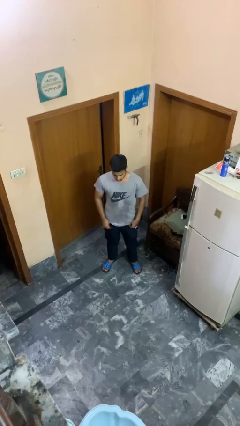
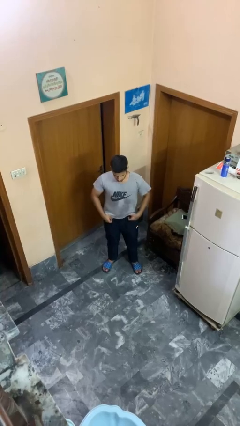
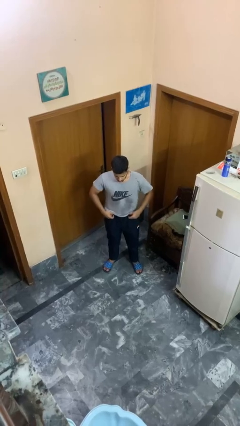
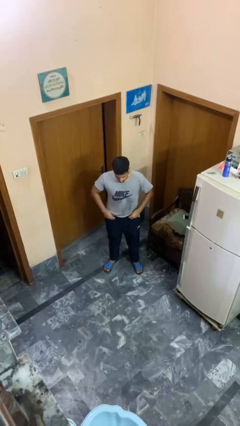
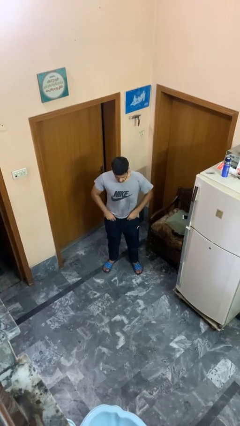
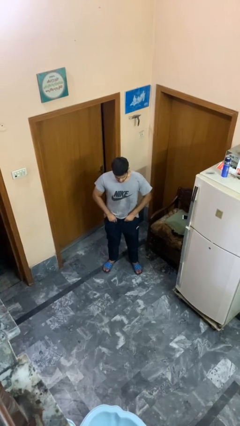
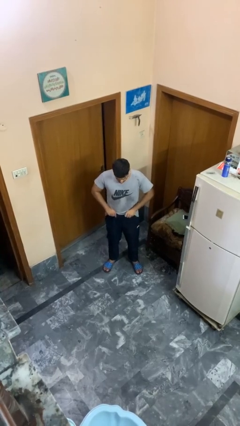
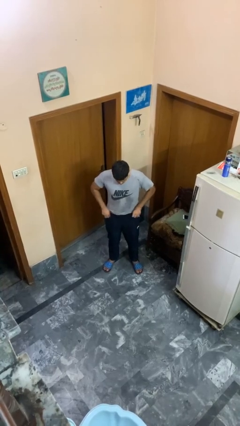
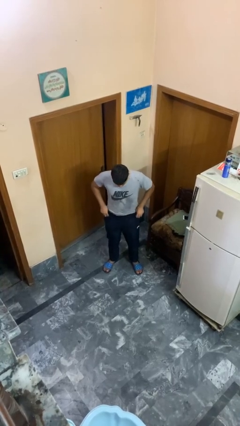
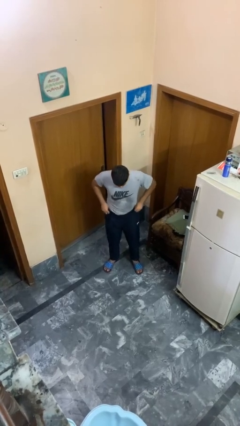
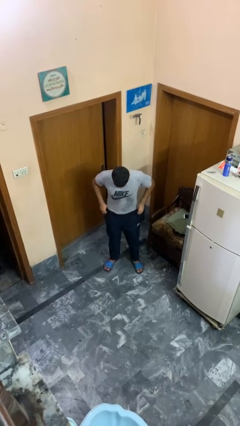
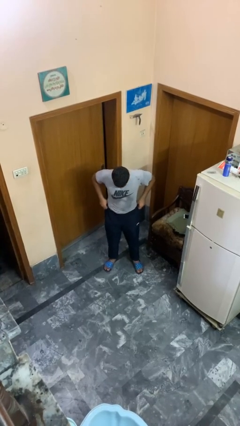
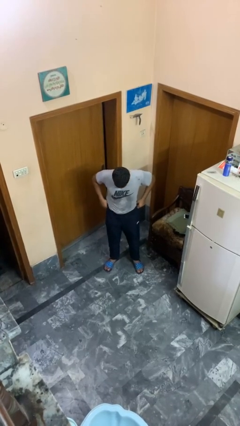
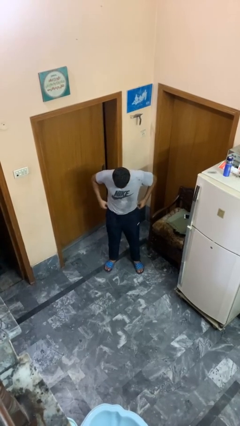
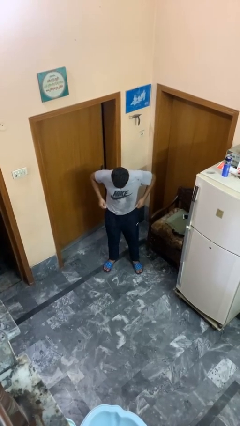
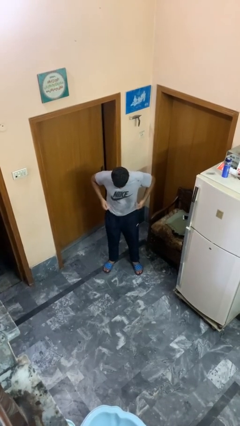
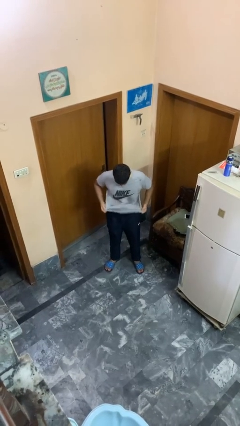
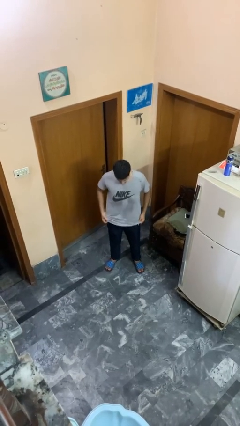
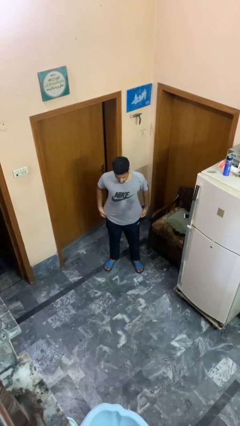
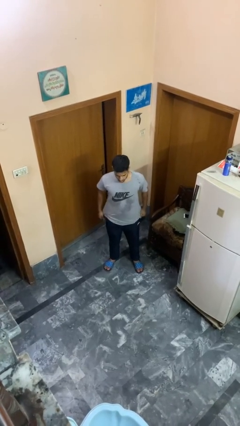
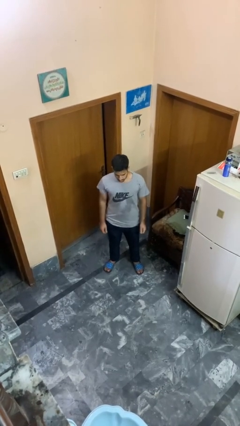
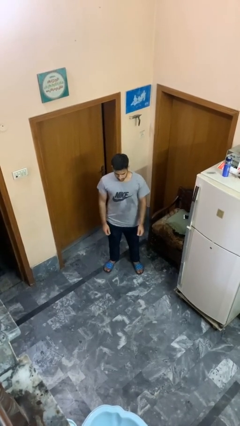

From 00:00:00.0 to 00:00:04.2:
person hikes up pants

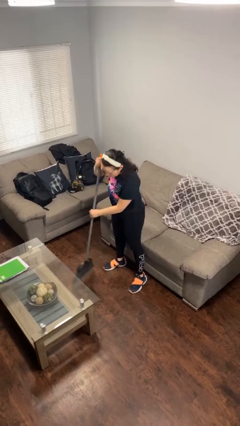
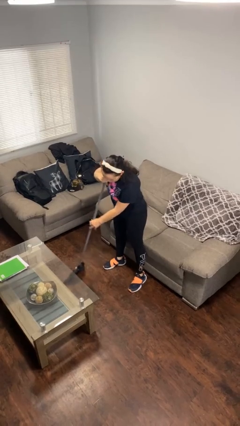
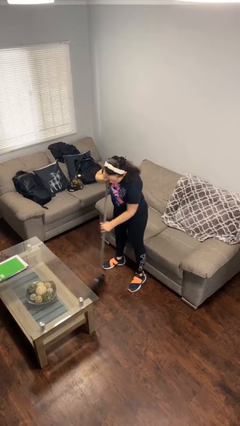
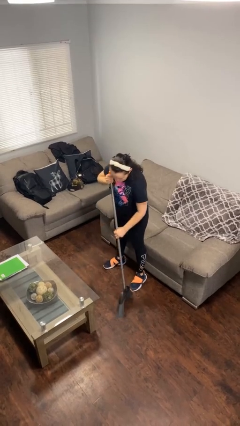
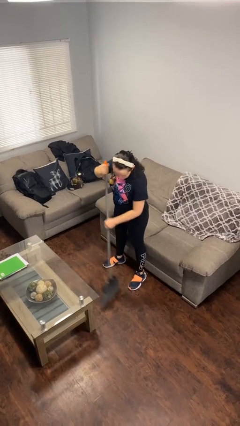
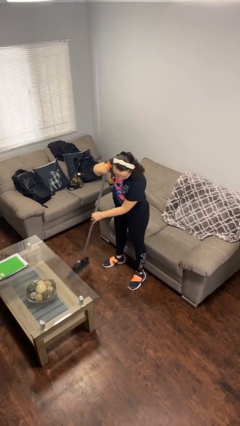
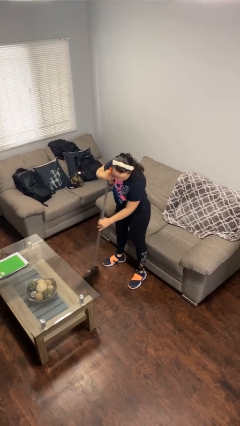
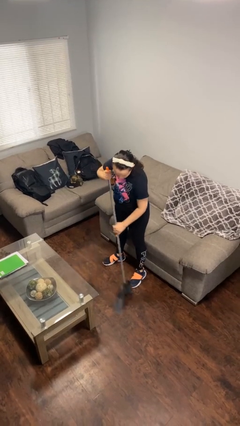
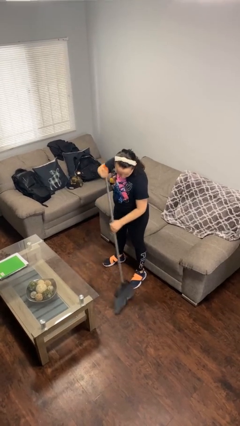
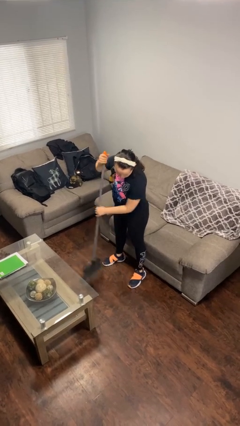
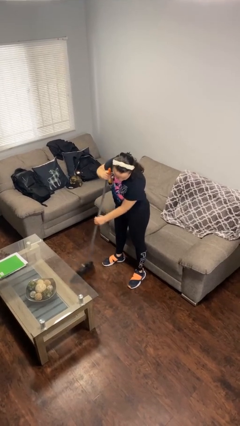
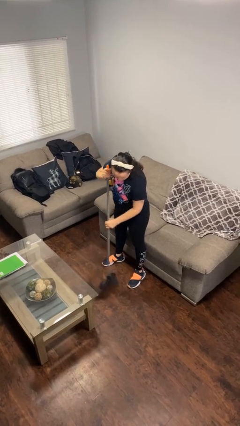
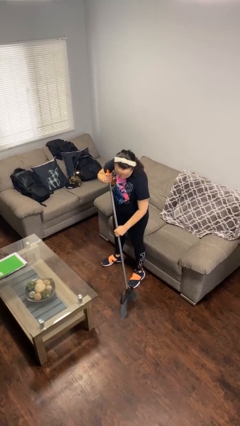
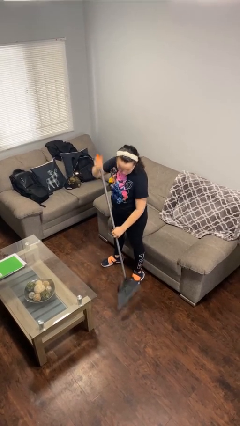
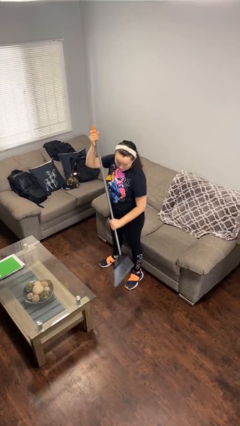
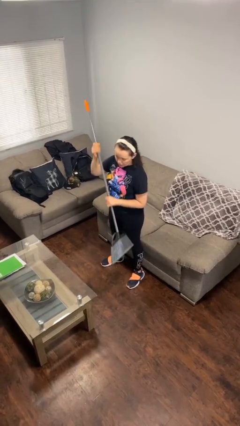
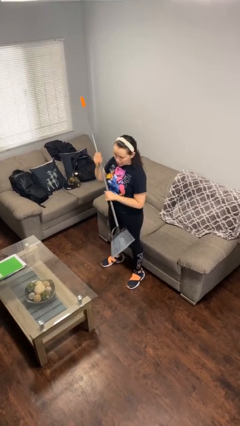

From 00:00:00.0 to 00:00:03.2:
person sweeps floor

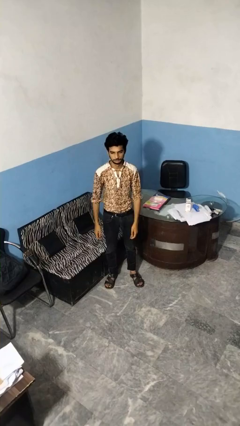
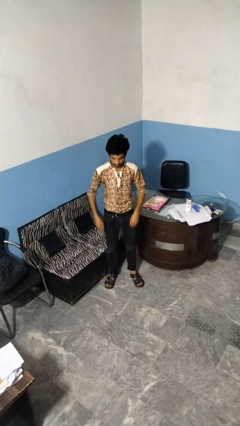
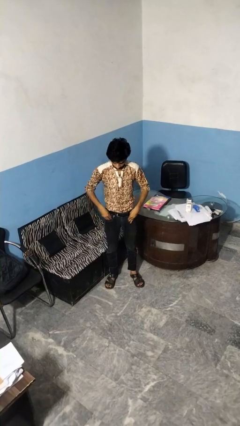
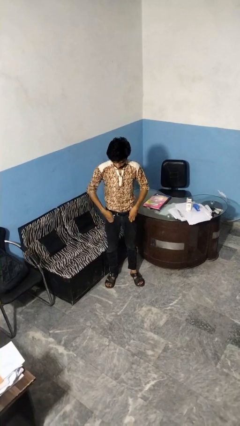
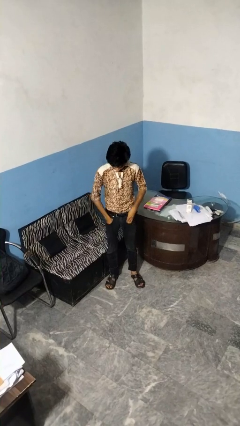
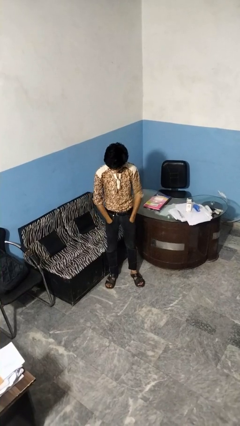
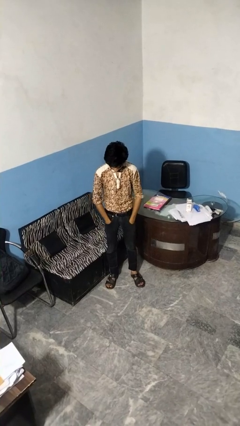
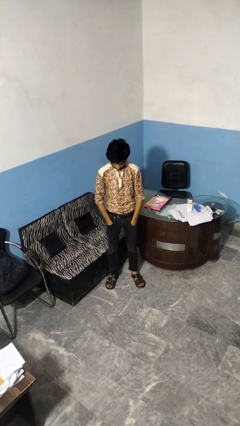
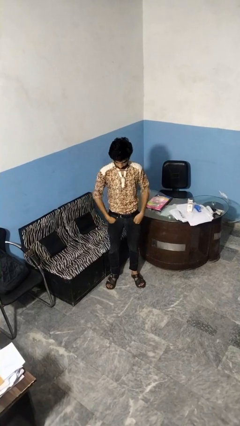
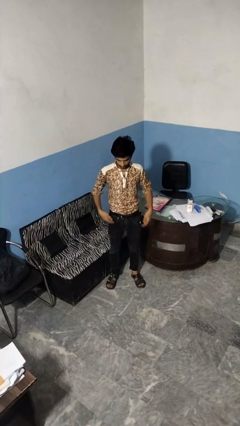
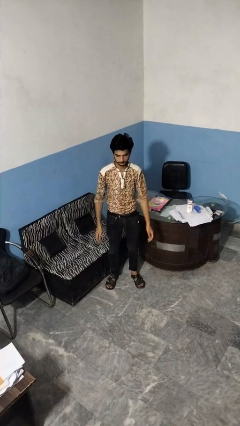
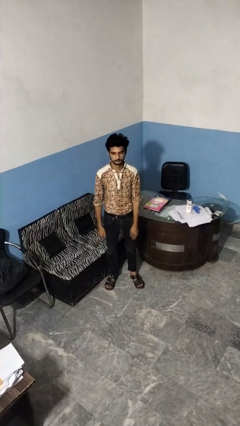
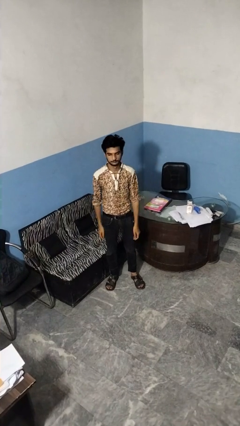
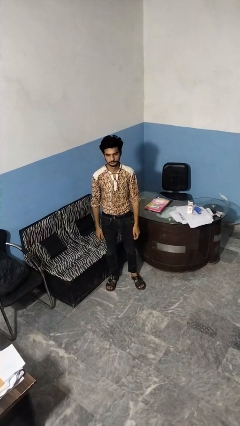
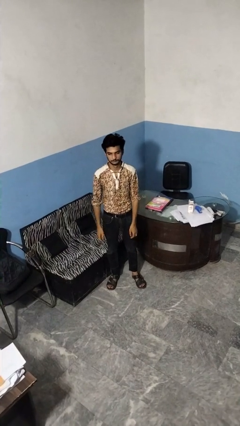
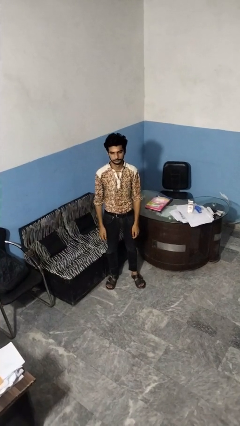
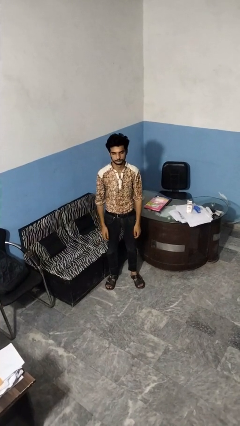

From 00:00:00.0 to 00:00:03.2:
person puts hands in back pockets

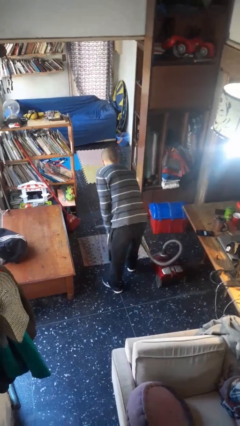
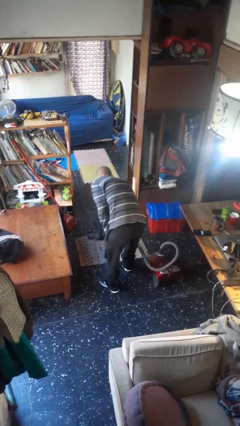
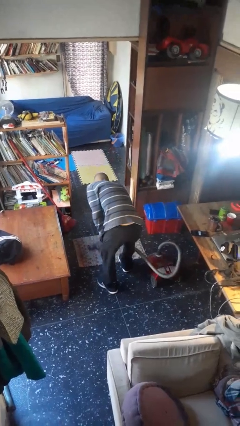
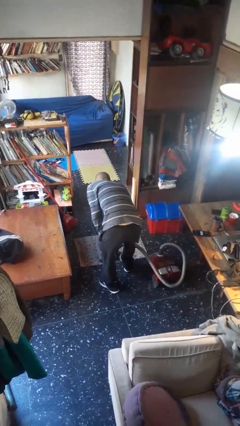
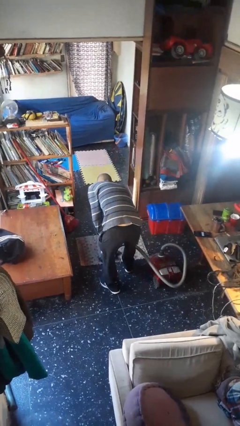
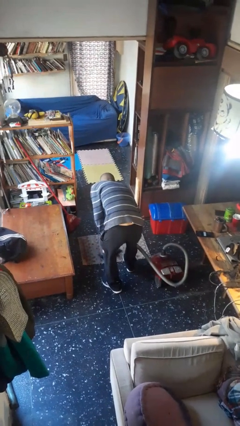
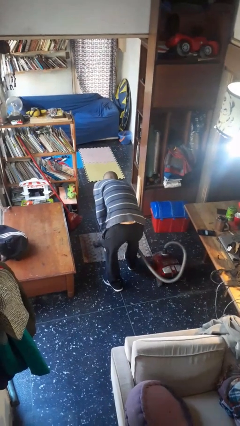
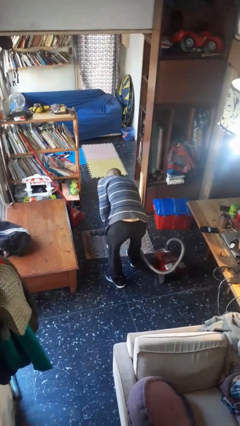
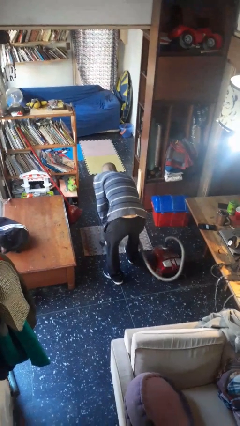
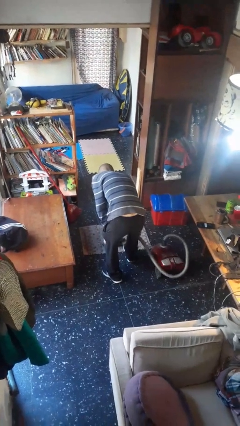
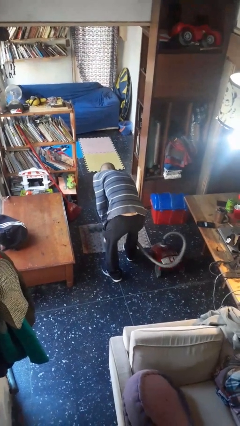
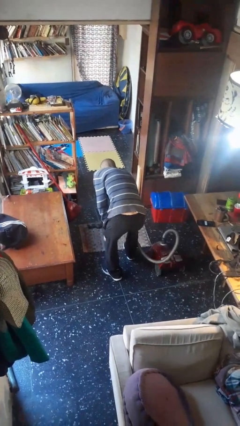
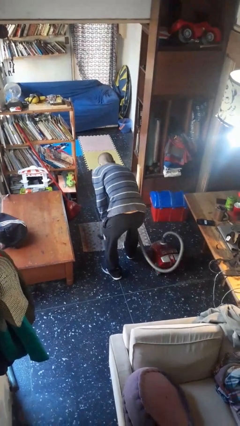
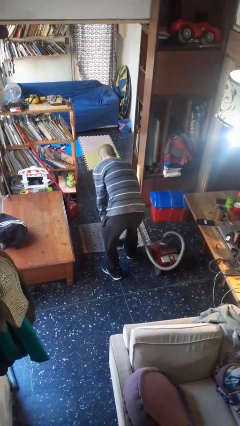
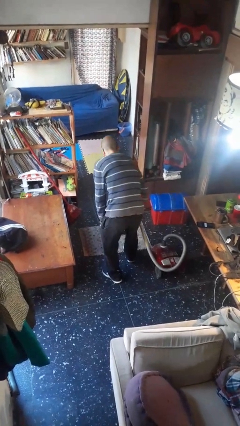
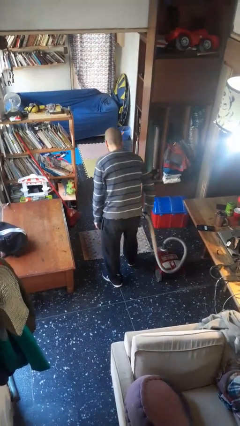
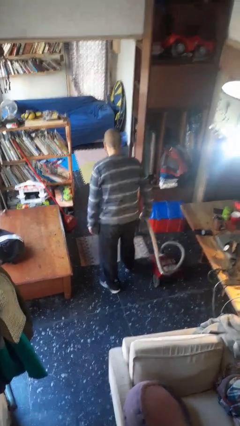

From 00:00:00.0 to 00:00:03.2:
person vacuums carpet

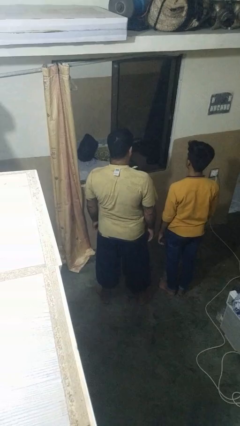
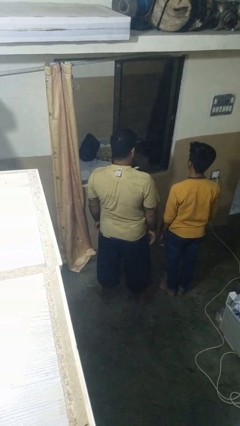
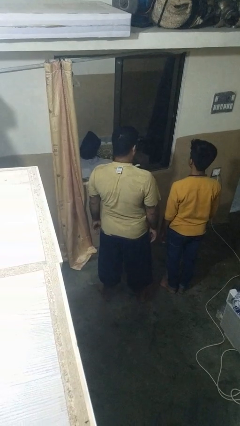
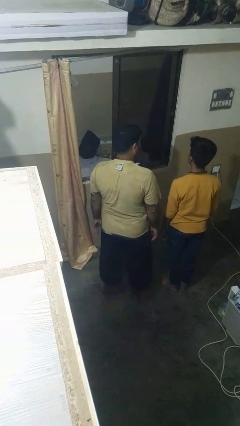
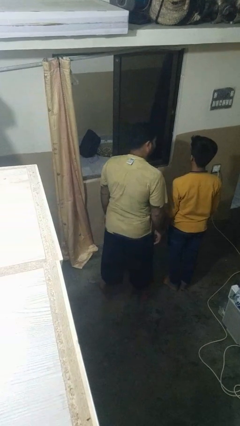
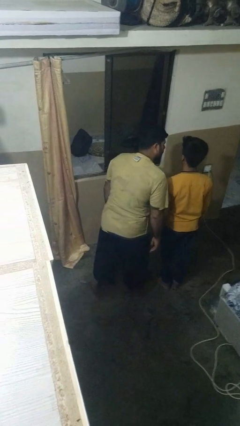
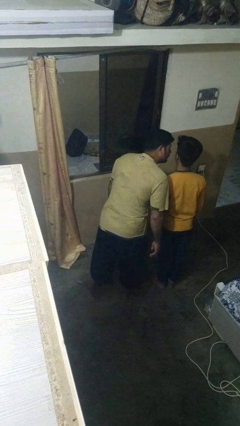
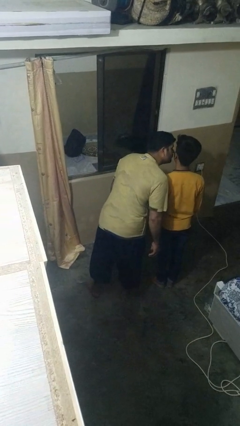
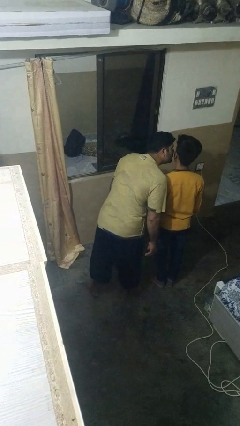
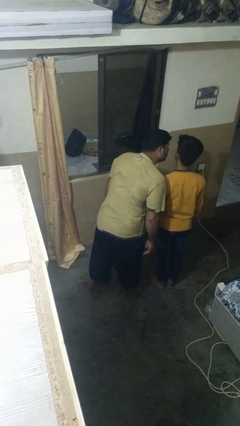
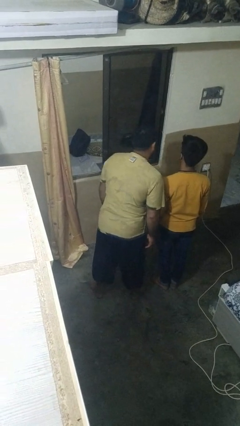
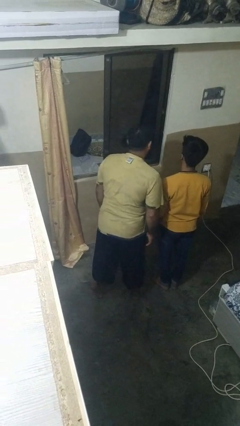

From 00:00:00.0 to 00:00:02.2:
person kisses cheek of person

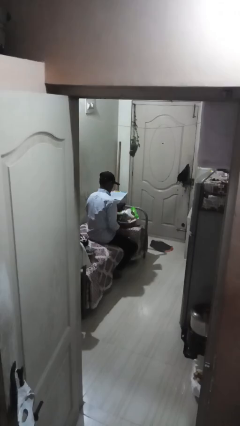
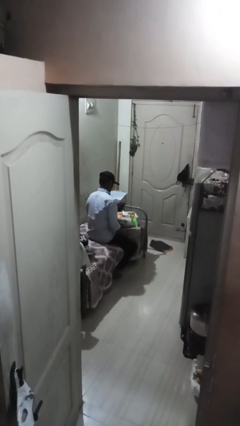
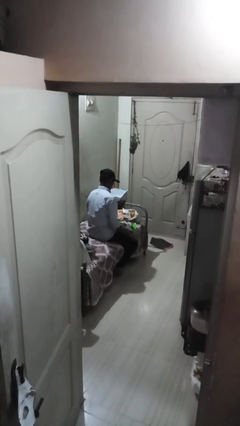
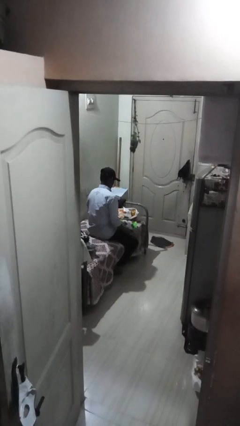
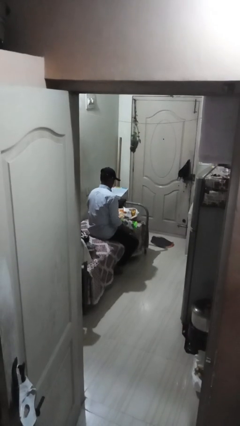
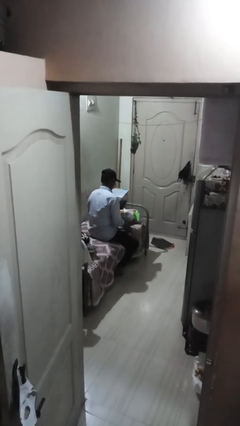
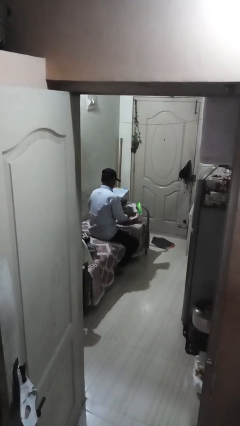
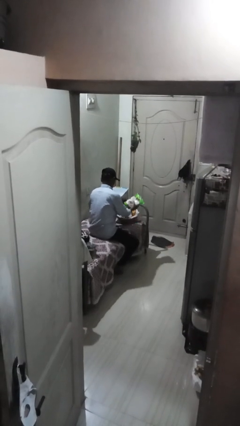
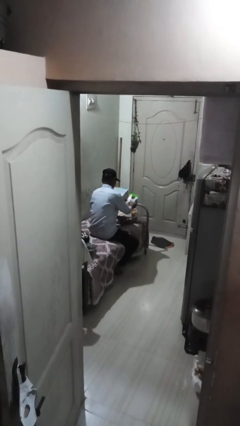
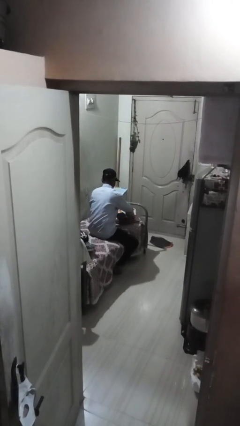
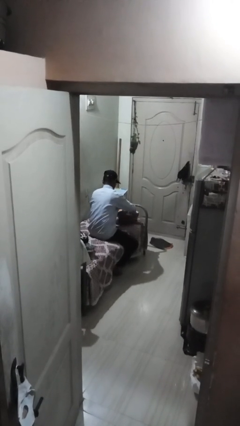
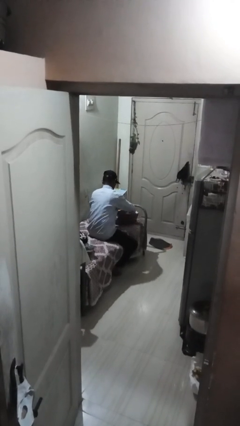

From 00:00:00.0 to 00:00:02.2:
person puts object into bag
